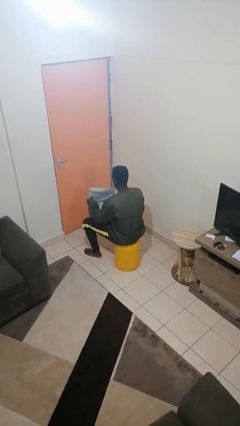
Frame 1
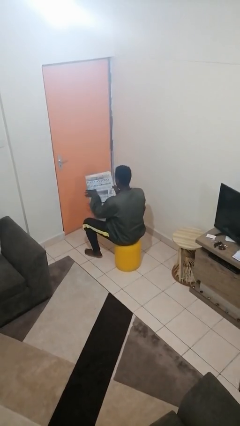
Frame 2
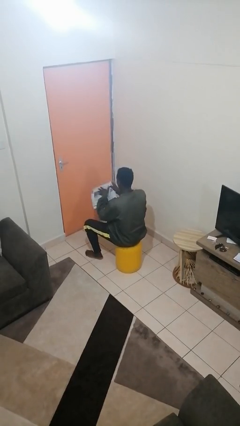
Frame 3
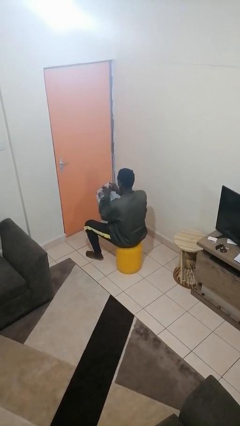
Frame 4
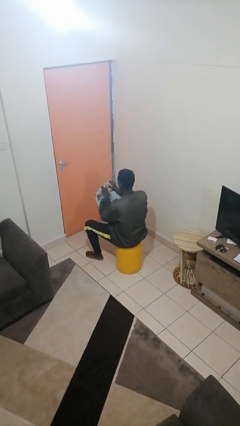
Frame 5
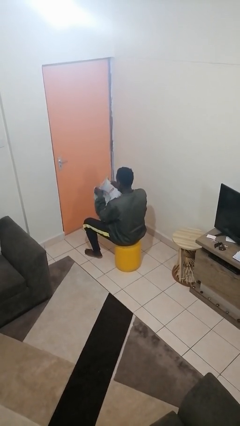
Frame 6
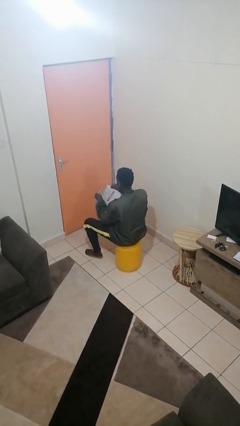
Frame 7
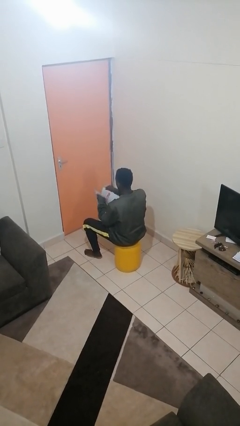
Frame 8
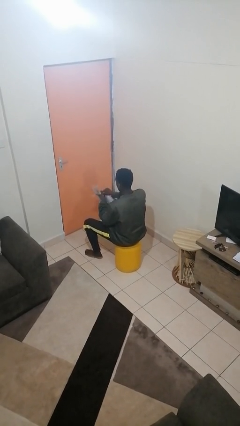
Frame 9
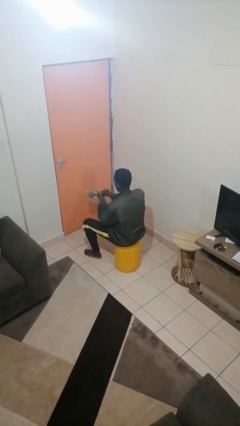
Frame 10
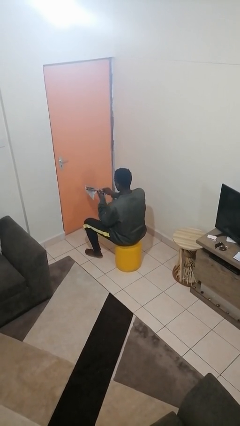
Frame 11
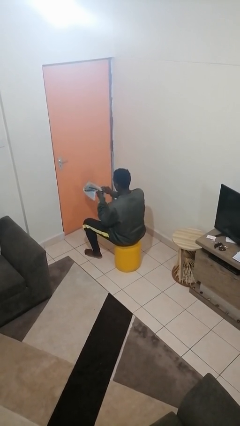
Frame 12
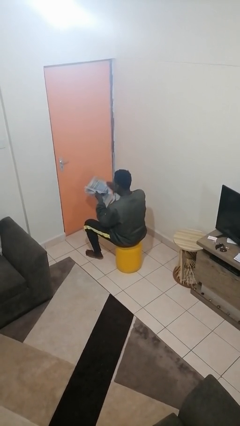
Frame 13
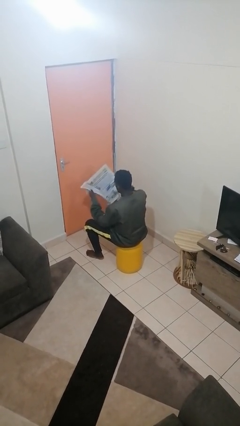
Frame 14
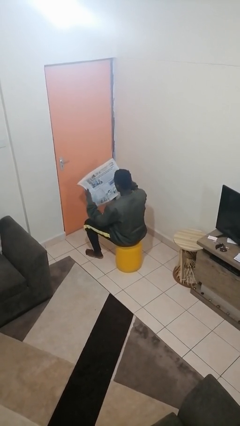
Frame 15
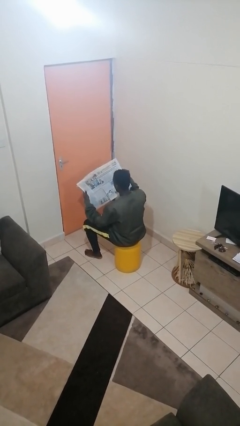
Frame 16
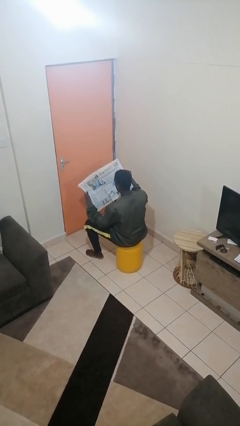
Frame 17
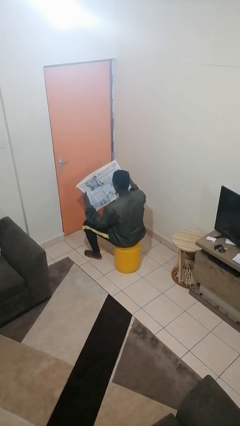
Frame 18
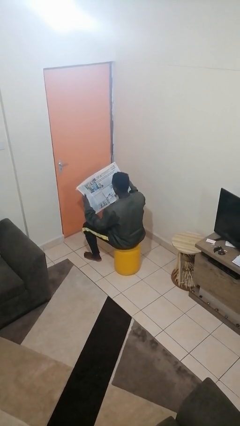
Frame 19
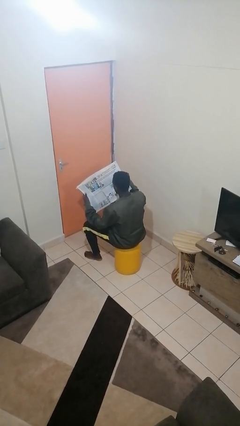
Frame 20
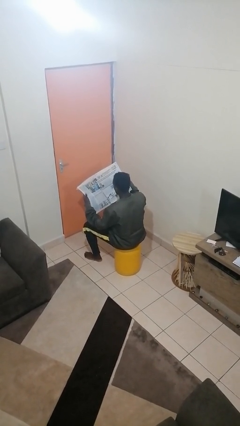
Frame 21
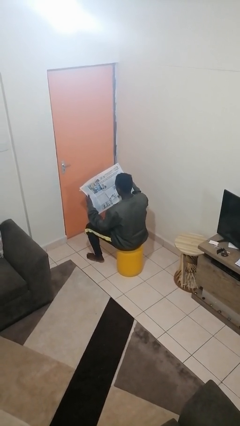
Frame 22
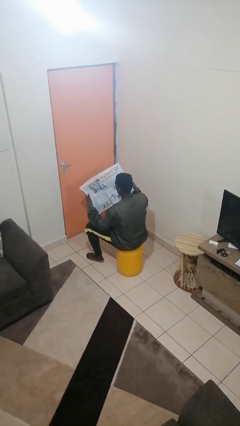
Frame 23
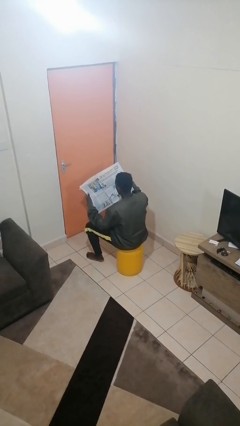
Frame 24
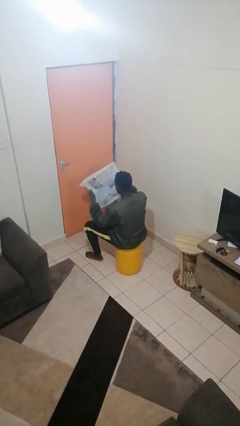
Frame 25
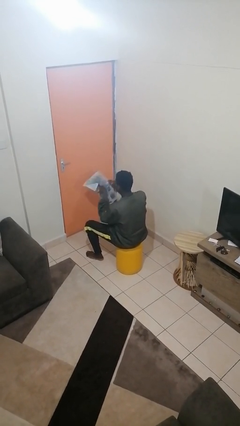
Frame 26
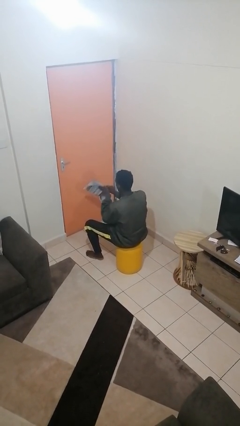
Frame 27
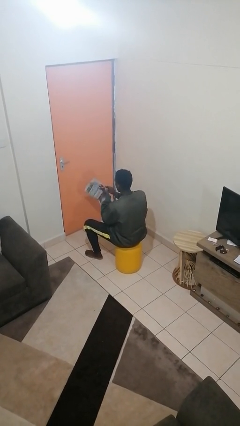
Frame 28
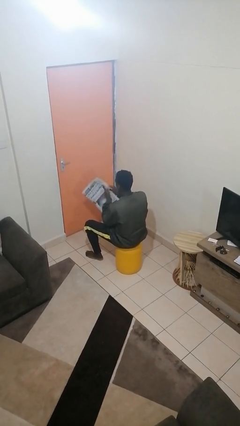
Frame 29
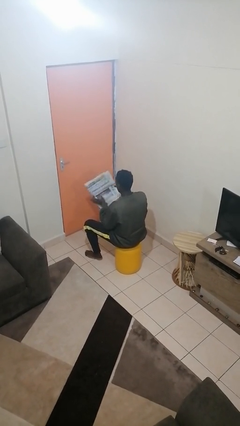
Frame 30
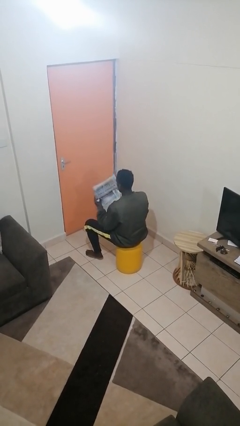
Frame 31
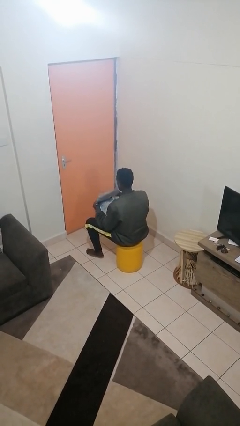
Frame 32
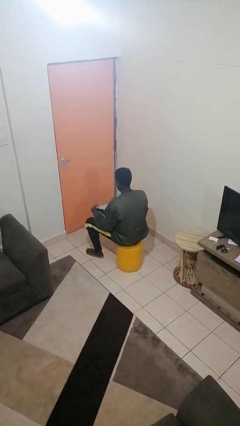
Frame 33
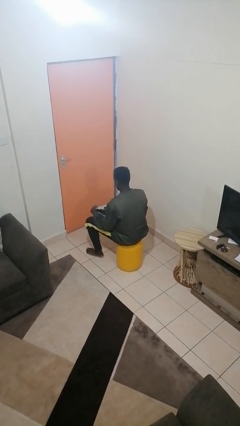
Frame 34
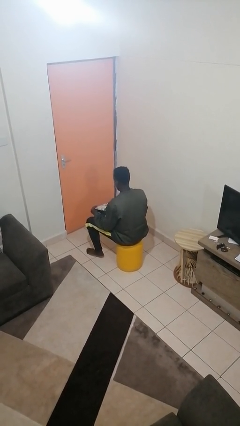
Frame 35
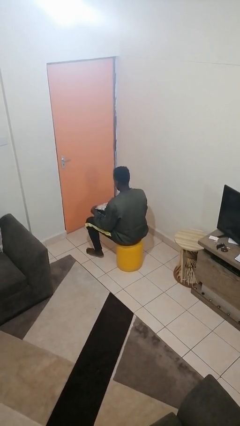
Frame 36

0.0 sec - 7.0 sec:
person reads newspaper

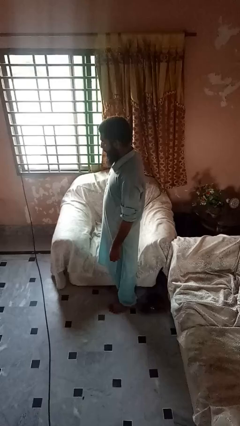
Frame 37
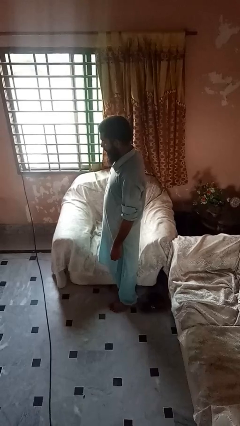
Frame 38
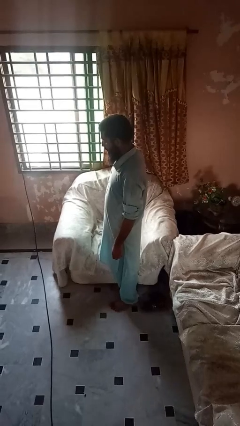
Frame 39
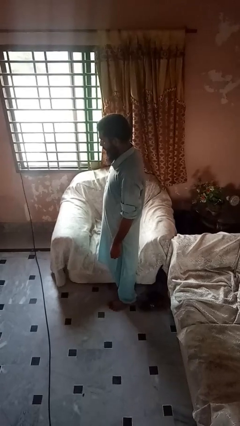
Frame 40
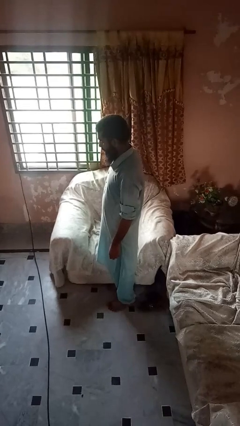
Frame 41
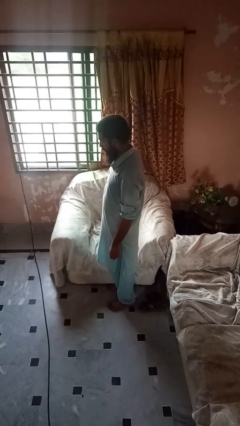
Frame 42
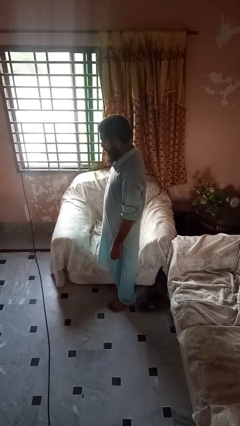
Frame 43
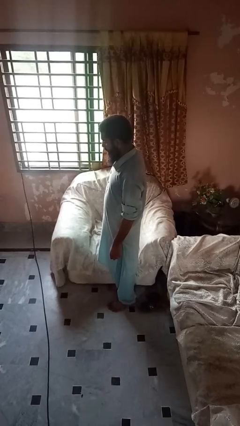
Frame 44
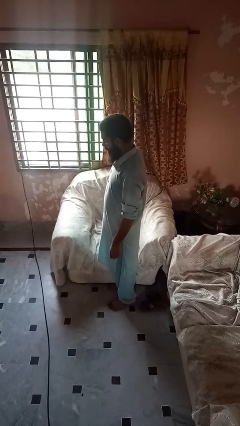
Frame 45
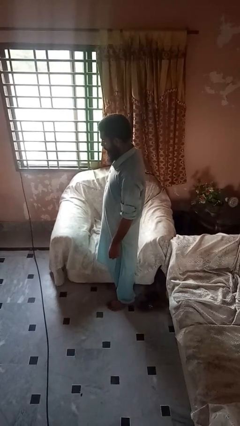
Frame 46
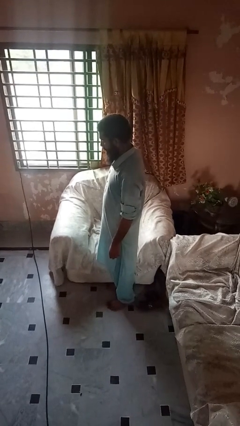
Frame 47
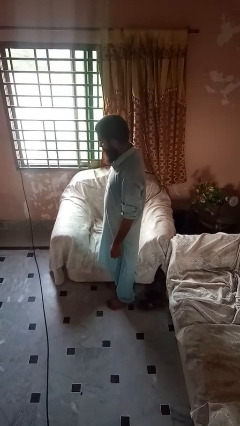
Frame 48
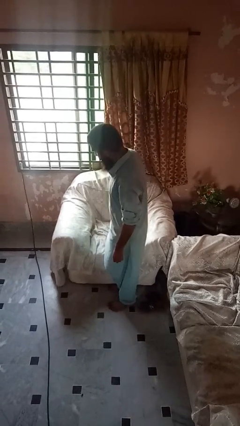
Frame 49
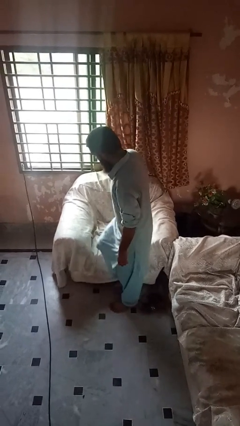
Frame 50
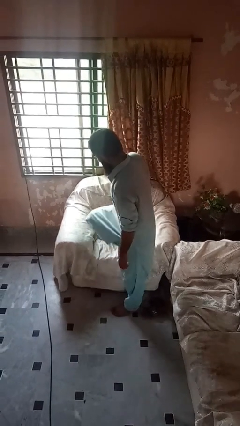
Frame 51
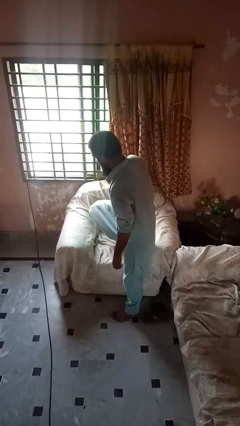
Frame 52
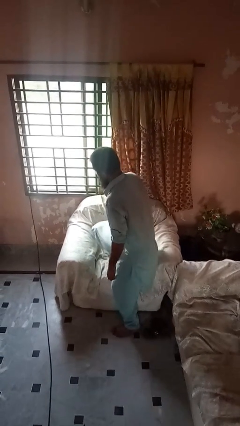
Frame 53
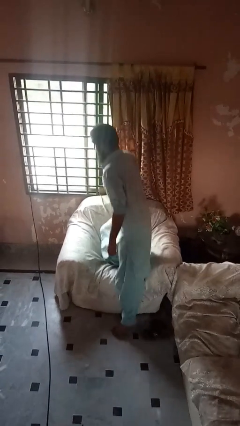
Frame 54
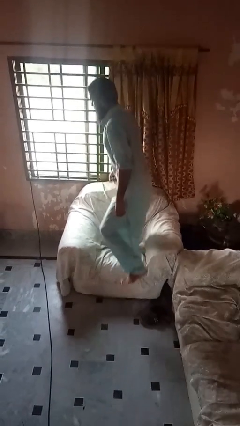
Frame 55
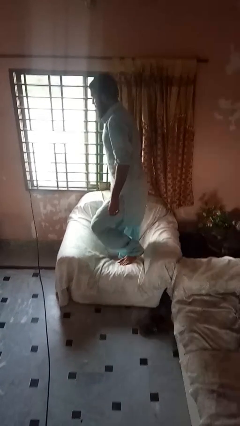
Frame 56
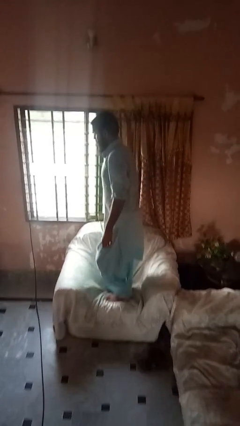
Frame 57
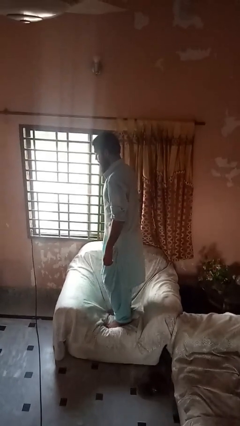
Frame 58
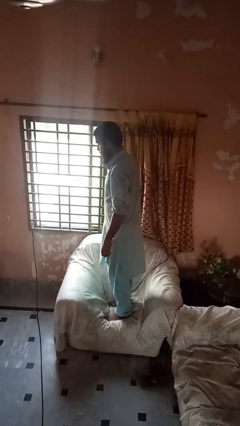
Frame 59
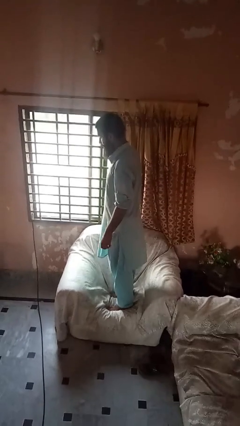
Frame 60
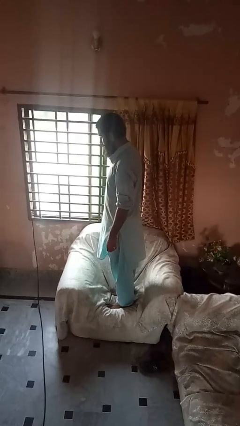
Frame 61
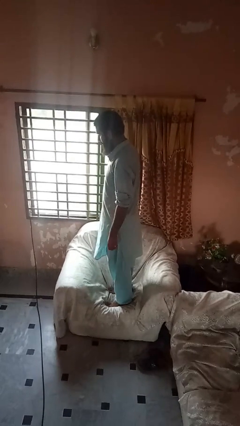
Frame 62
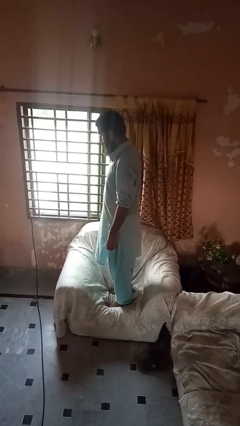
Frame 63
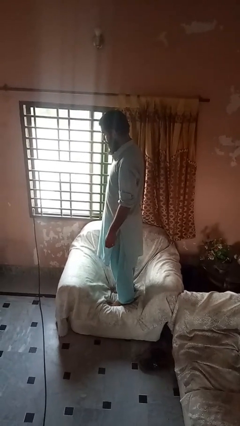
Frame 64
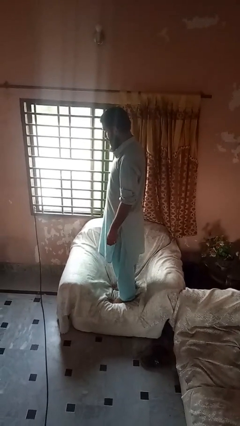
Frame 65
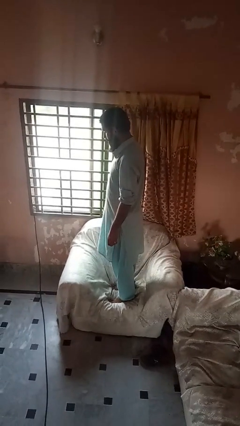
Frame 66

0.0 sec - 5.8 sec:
person climbs on couch

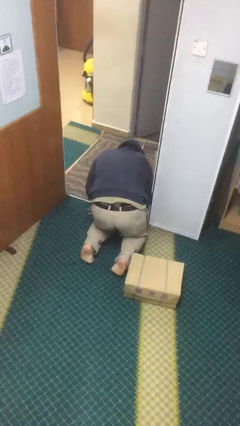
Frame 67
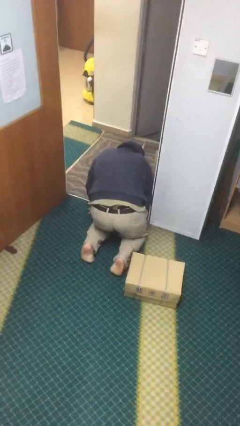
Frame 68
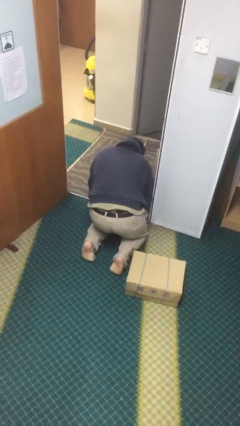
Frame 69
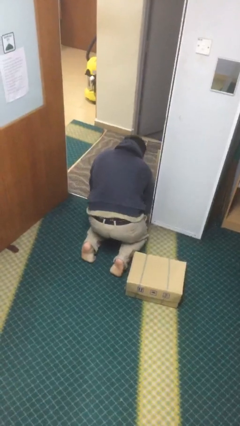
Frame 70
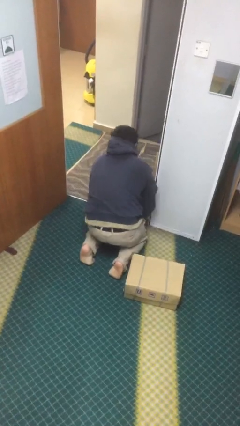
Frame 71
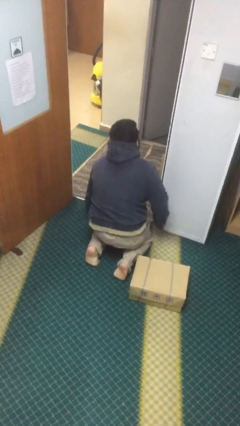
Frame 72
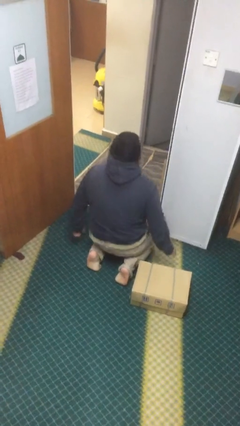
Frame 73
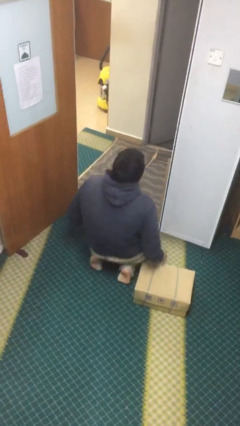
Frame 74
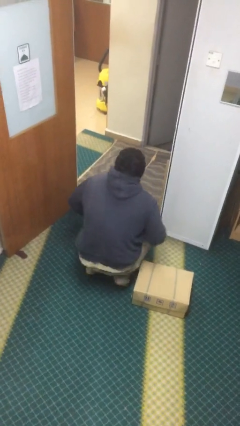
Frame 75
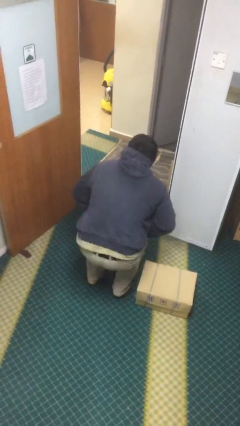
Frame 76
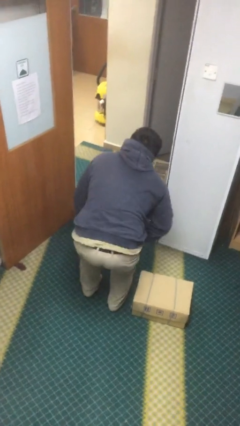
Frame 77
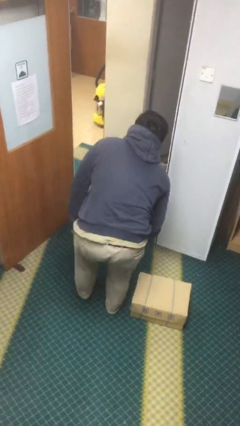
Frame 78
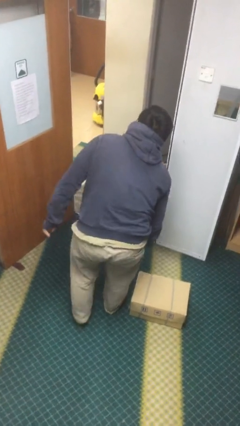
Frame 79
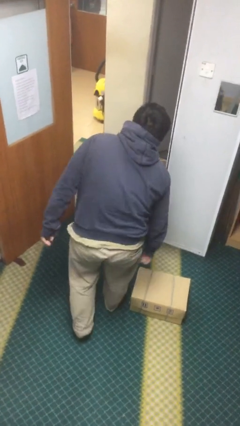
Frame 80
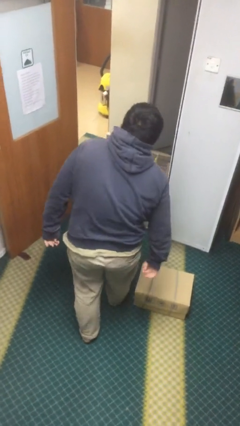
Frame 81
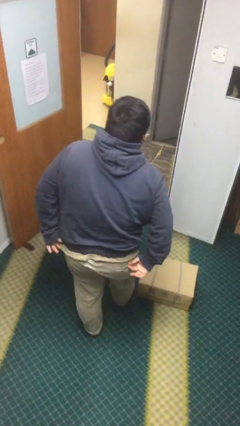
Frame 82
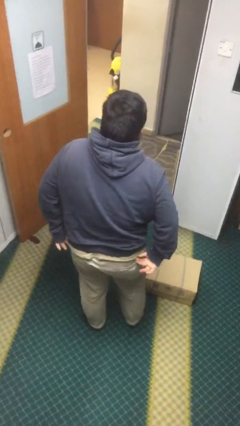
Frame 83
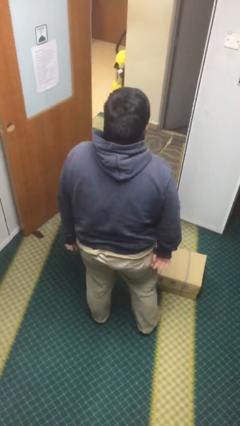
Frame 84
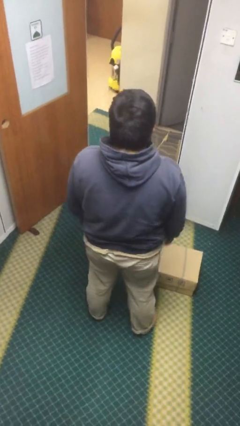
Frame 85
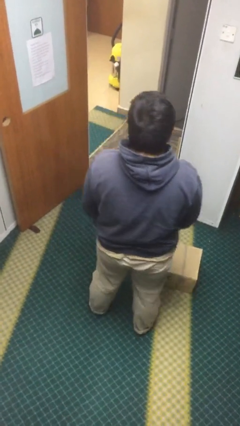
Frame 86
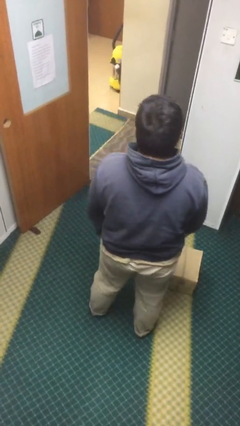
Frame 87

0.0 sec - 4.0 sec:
person stands up from floor

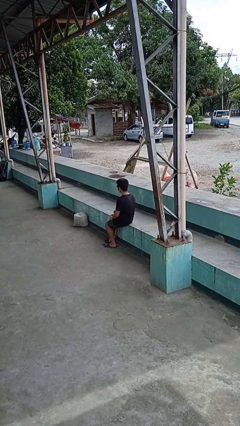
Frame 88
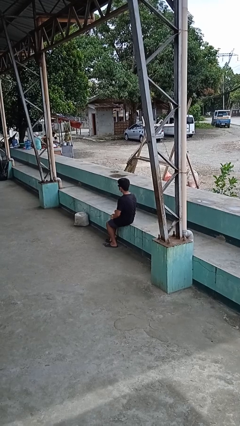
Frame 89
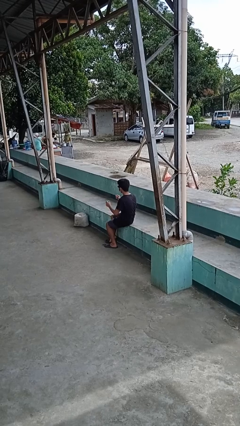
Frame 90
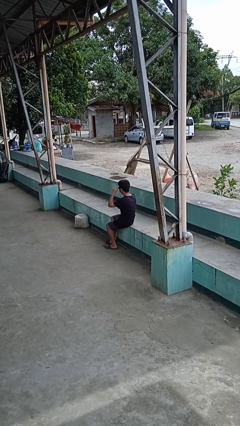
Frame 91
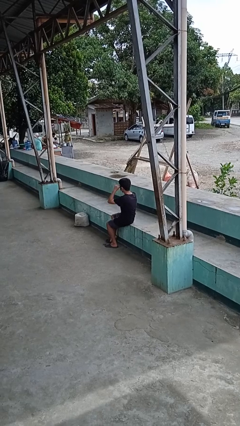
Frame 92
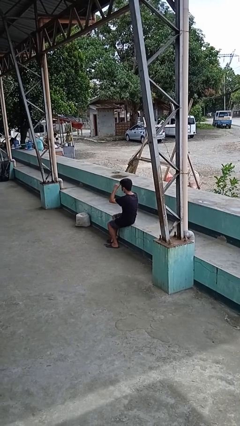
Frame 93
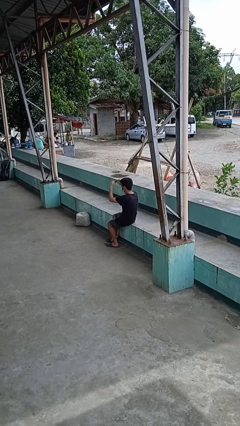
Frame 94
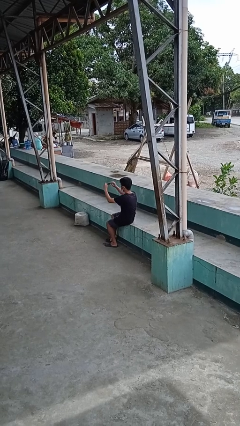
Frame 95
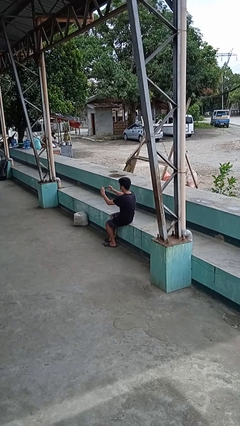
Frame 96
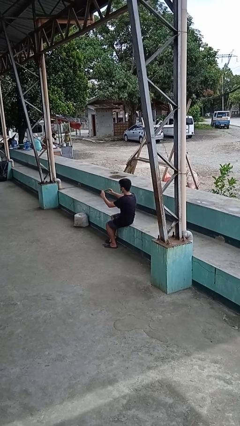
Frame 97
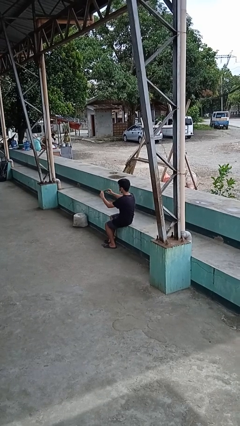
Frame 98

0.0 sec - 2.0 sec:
person takes off sunglasses
